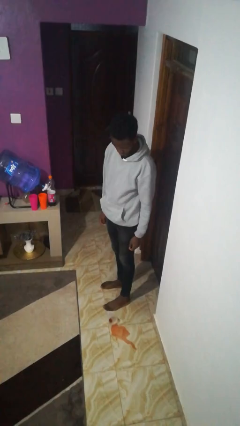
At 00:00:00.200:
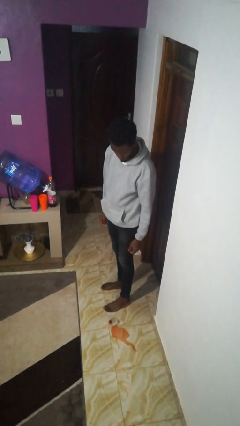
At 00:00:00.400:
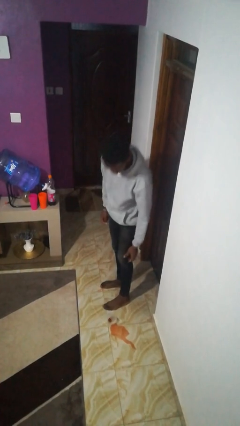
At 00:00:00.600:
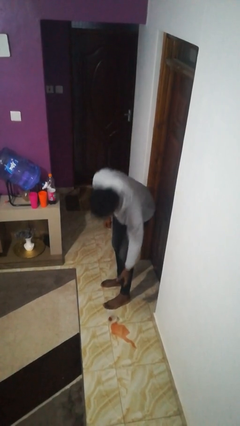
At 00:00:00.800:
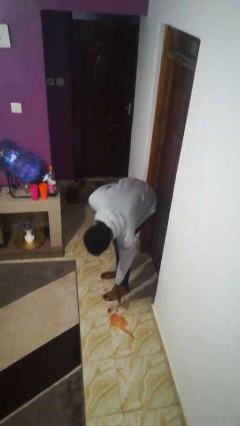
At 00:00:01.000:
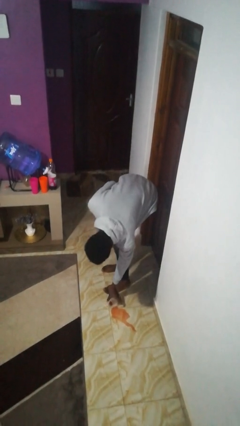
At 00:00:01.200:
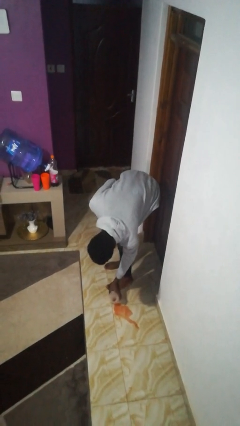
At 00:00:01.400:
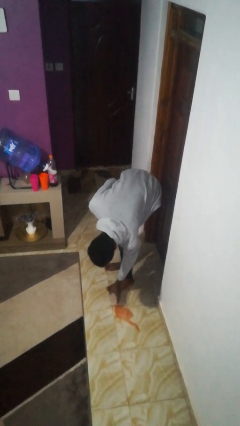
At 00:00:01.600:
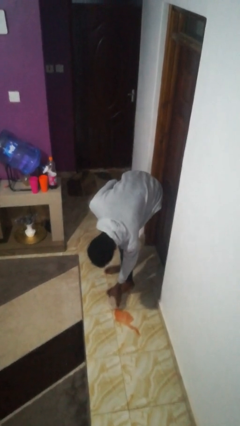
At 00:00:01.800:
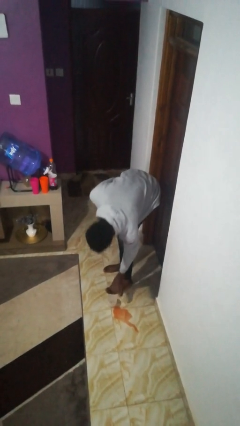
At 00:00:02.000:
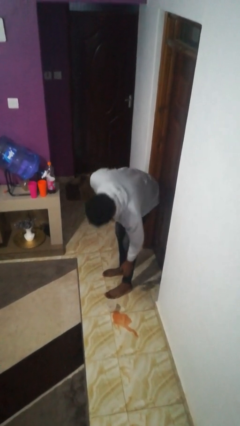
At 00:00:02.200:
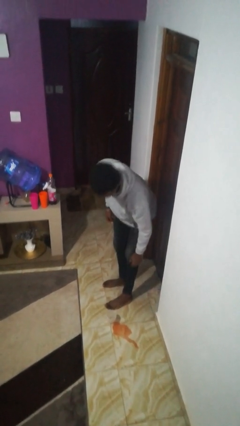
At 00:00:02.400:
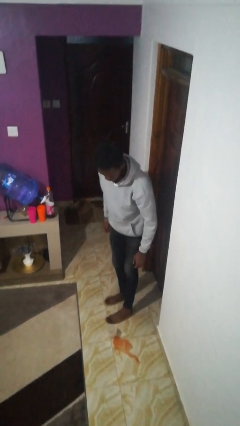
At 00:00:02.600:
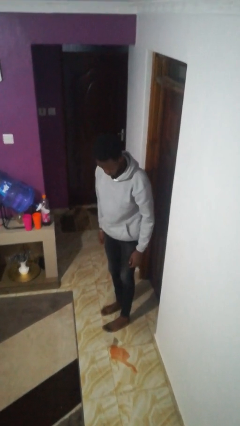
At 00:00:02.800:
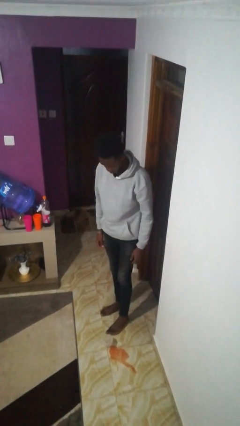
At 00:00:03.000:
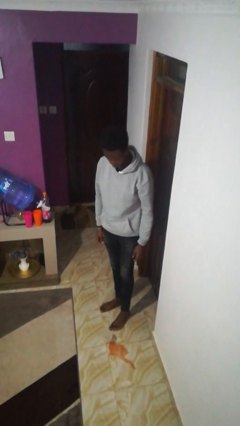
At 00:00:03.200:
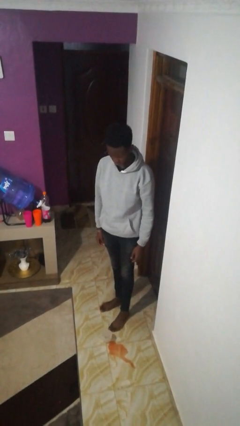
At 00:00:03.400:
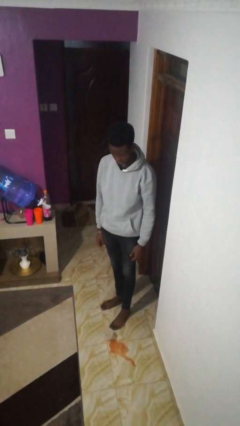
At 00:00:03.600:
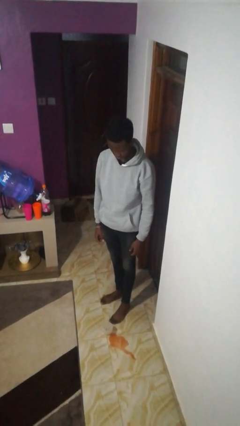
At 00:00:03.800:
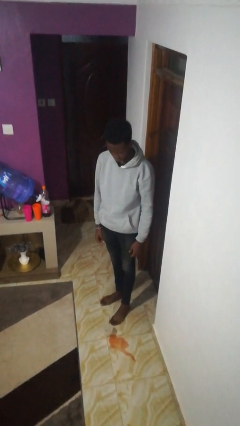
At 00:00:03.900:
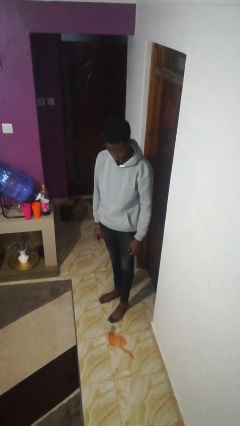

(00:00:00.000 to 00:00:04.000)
person sets upright glass

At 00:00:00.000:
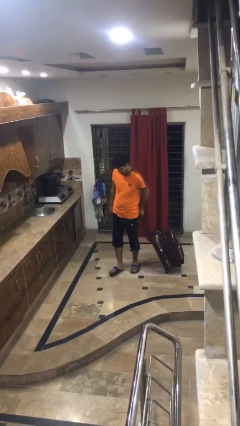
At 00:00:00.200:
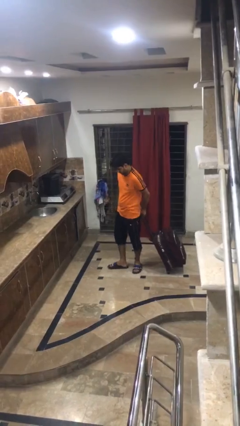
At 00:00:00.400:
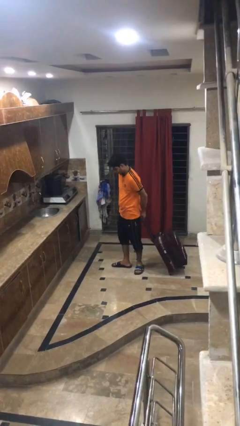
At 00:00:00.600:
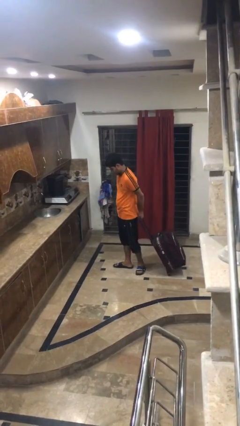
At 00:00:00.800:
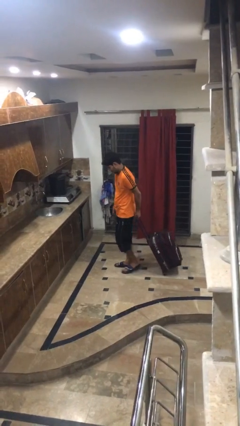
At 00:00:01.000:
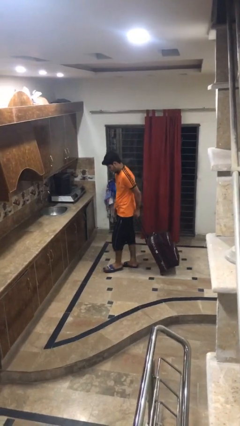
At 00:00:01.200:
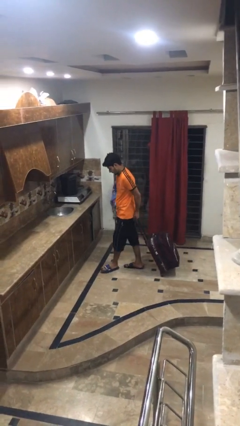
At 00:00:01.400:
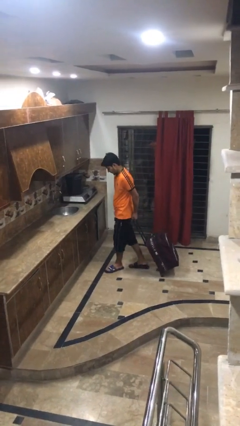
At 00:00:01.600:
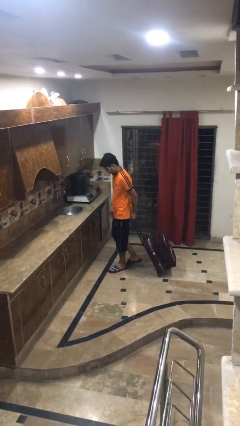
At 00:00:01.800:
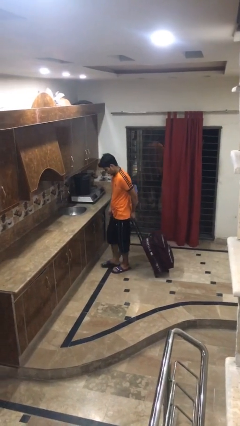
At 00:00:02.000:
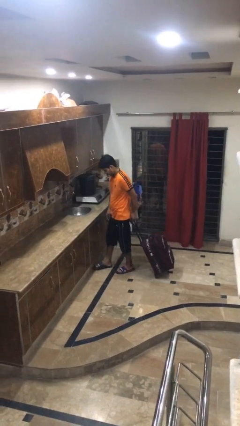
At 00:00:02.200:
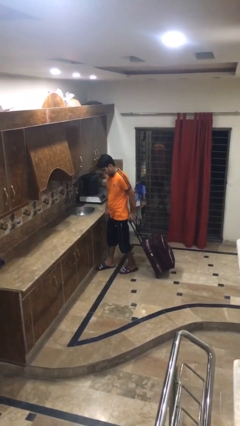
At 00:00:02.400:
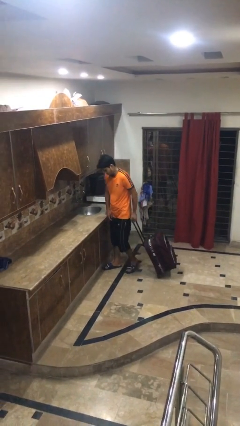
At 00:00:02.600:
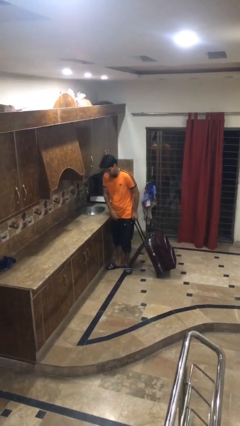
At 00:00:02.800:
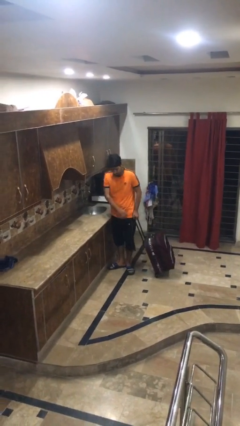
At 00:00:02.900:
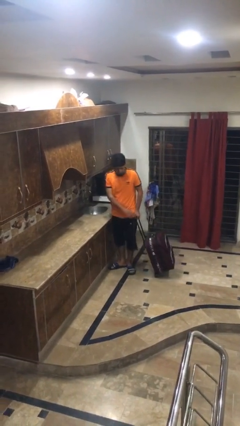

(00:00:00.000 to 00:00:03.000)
person pulls wheeled cart

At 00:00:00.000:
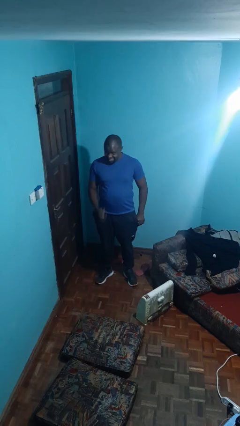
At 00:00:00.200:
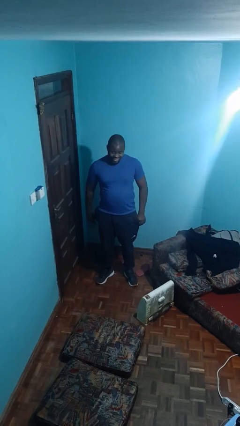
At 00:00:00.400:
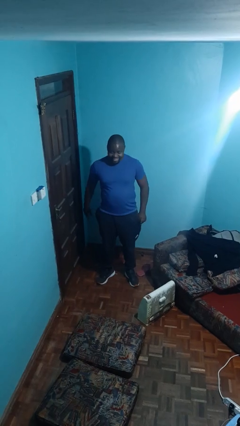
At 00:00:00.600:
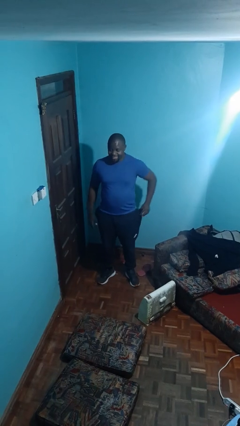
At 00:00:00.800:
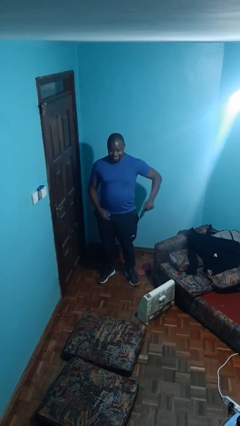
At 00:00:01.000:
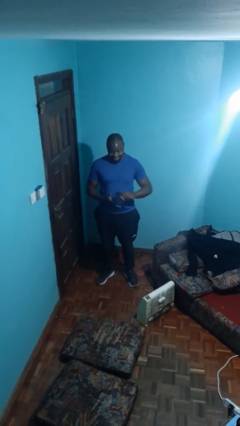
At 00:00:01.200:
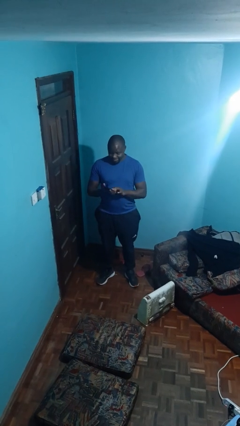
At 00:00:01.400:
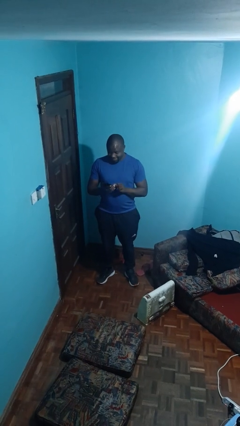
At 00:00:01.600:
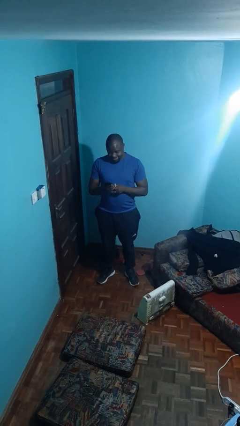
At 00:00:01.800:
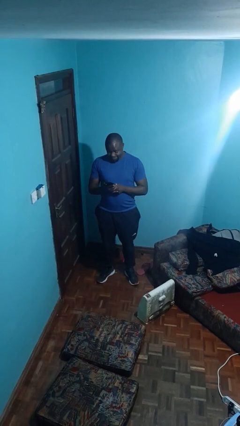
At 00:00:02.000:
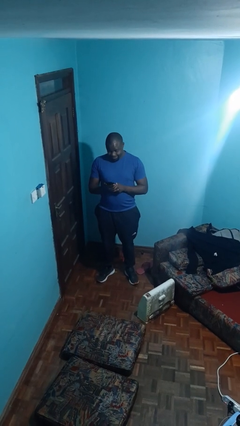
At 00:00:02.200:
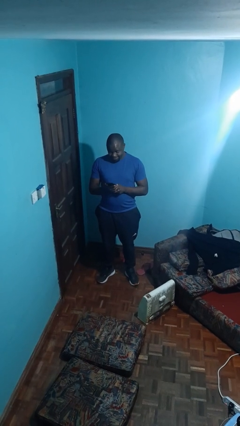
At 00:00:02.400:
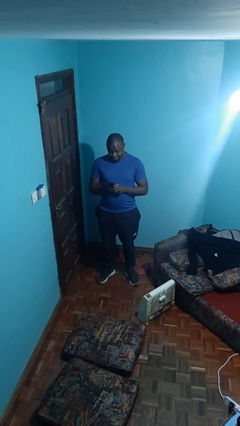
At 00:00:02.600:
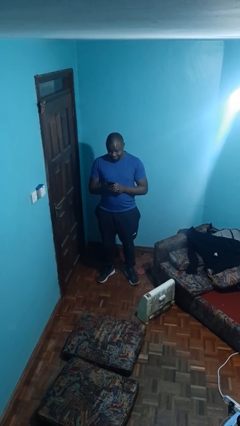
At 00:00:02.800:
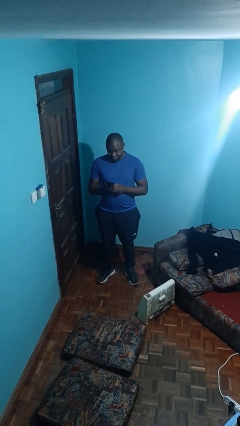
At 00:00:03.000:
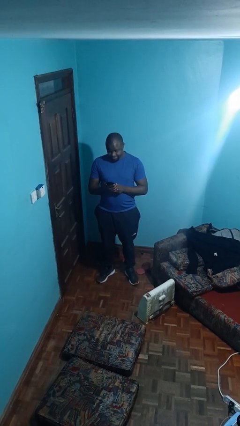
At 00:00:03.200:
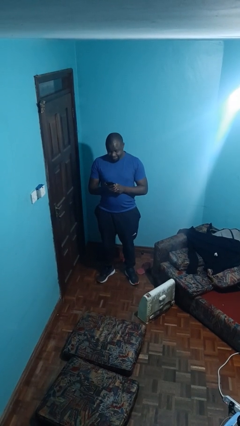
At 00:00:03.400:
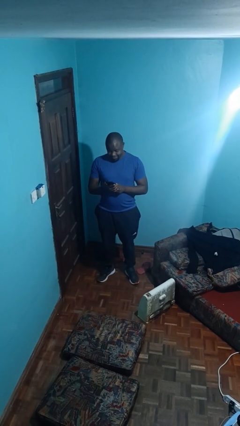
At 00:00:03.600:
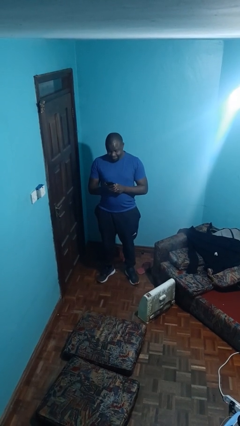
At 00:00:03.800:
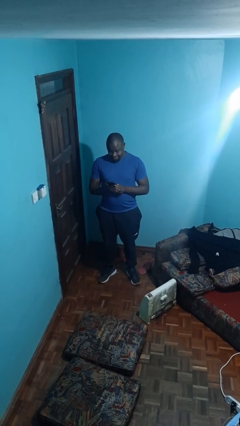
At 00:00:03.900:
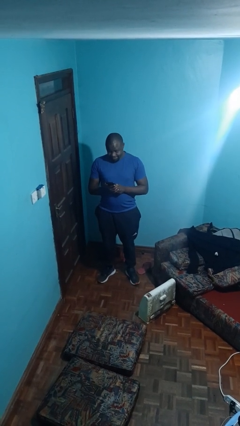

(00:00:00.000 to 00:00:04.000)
person takes phone from pocket

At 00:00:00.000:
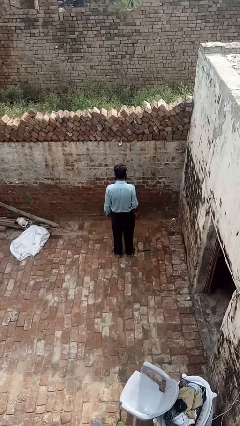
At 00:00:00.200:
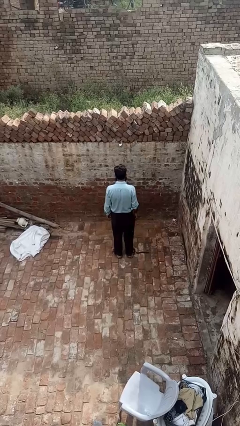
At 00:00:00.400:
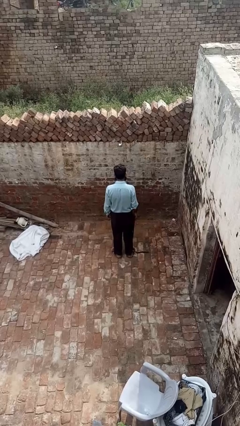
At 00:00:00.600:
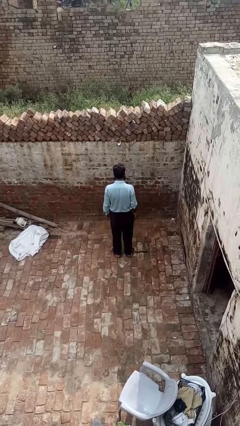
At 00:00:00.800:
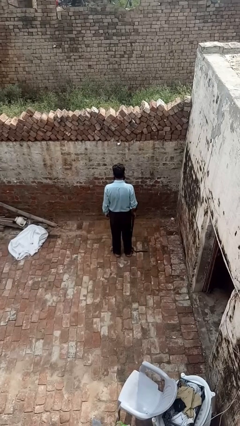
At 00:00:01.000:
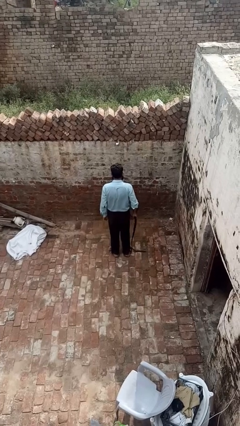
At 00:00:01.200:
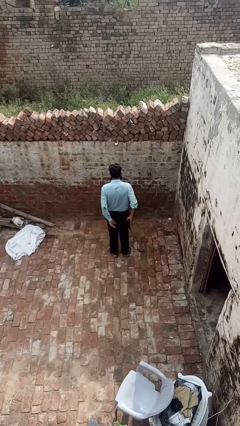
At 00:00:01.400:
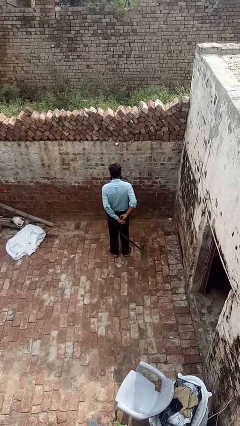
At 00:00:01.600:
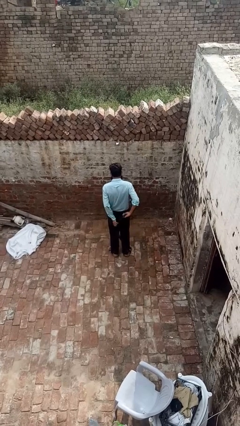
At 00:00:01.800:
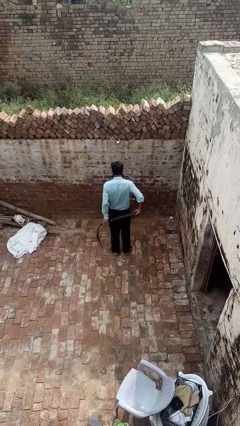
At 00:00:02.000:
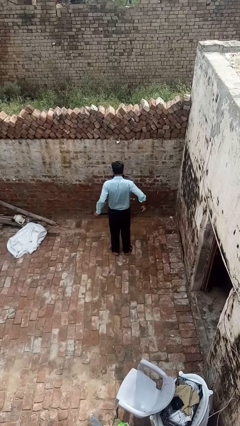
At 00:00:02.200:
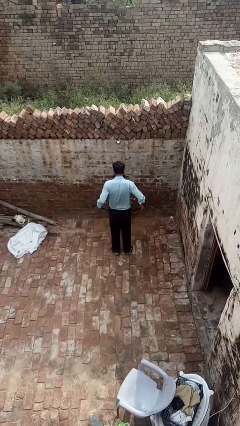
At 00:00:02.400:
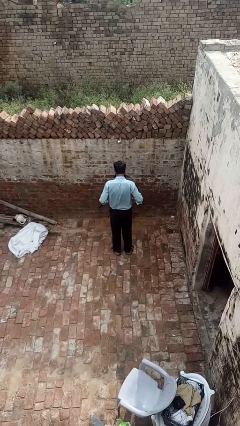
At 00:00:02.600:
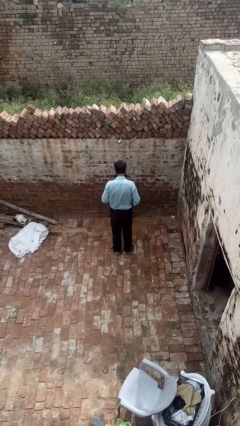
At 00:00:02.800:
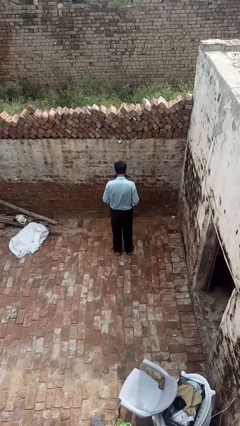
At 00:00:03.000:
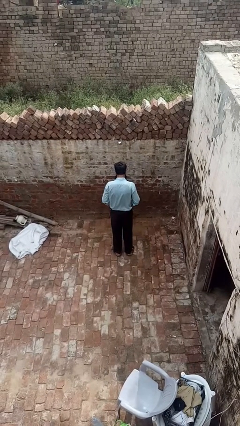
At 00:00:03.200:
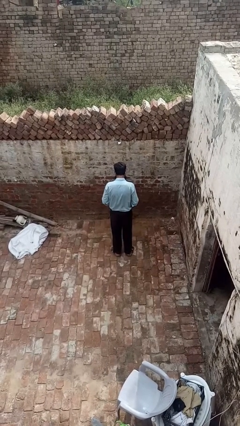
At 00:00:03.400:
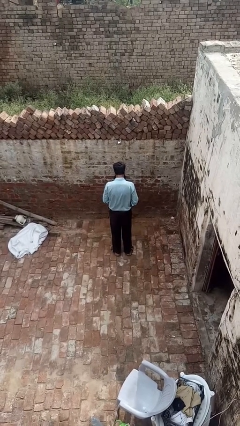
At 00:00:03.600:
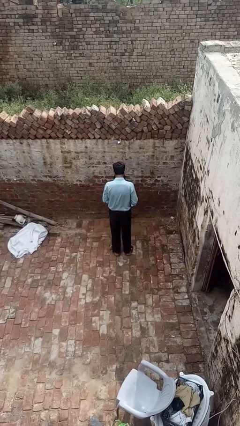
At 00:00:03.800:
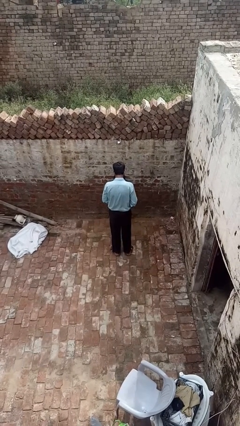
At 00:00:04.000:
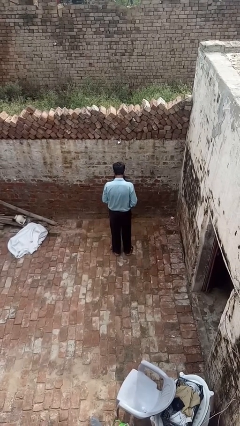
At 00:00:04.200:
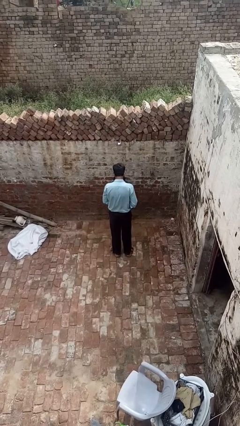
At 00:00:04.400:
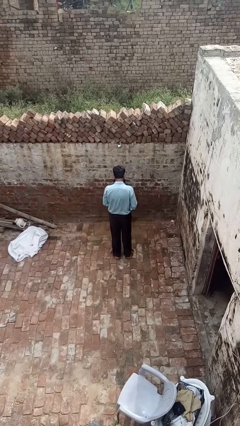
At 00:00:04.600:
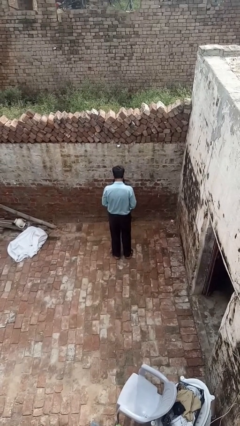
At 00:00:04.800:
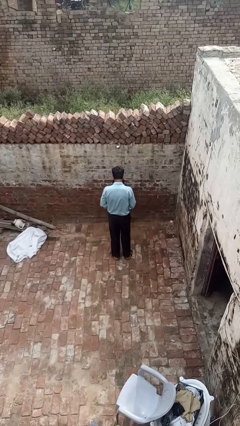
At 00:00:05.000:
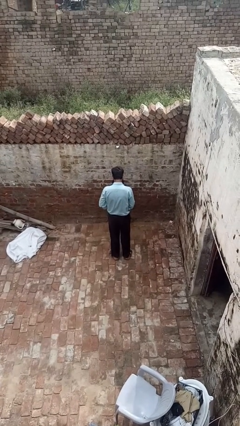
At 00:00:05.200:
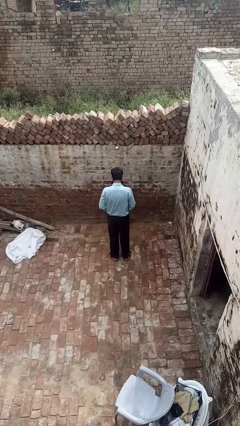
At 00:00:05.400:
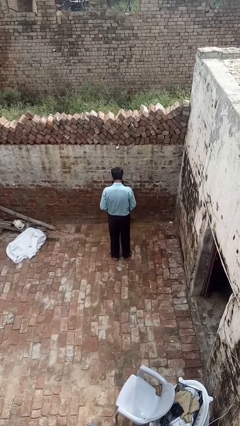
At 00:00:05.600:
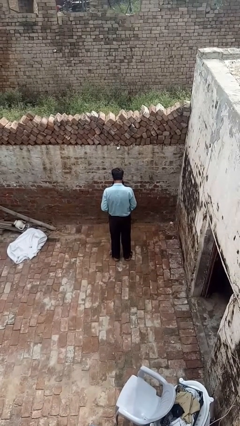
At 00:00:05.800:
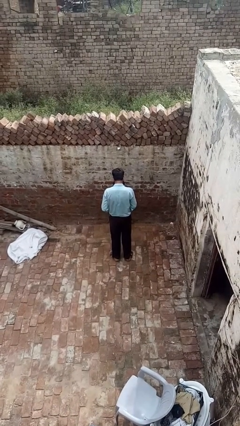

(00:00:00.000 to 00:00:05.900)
person puts on belt

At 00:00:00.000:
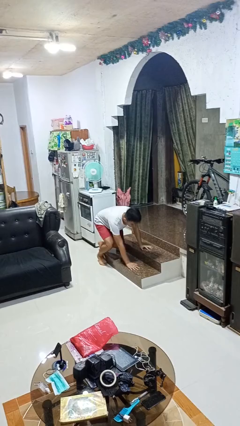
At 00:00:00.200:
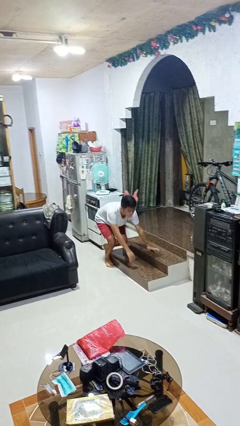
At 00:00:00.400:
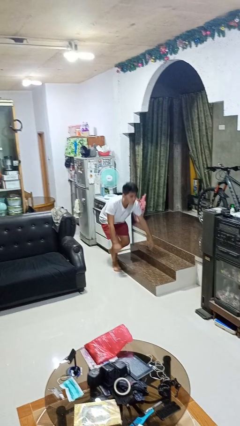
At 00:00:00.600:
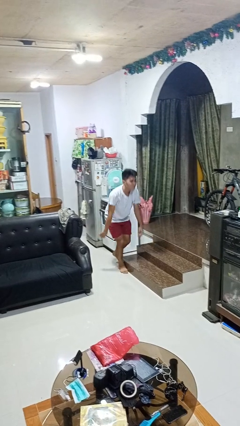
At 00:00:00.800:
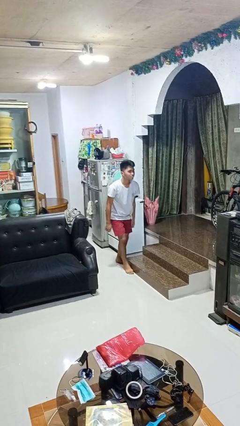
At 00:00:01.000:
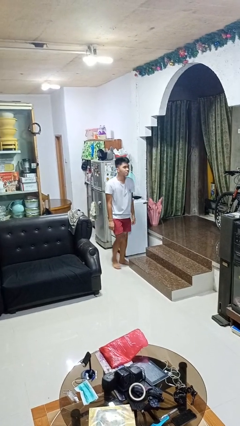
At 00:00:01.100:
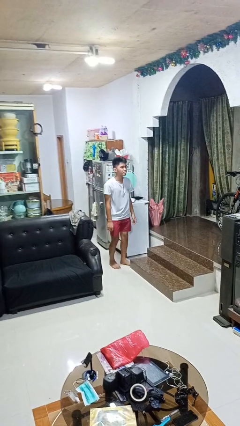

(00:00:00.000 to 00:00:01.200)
person stands up from floor
